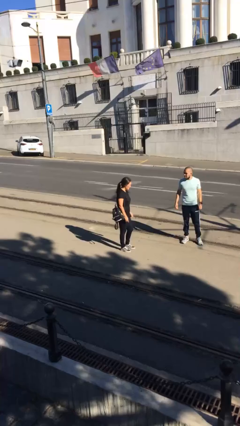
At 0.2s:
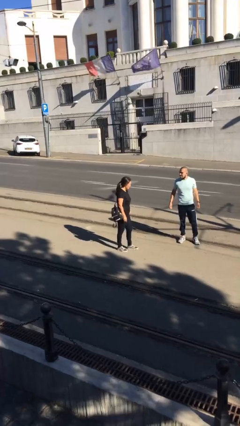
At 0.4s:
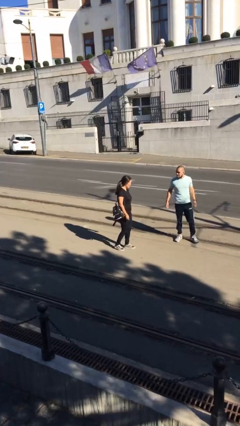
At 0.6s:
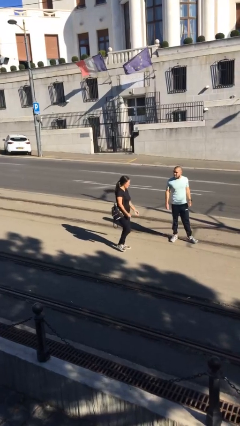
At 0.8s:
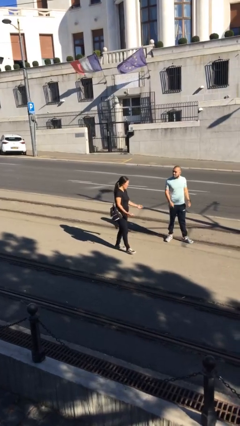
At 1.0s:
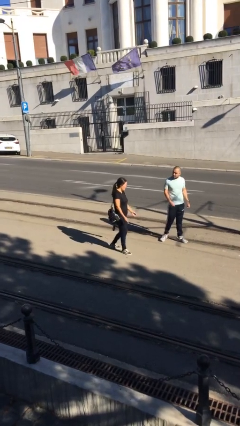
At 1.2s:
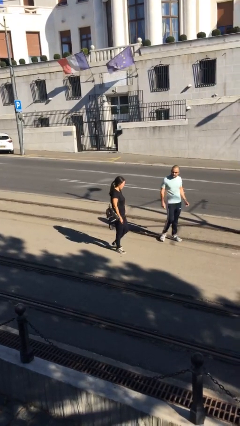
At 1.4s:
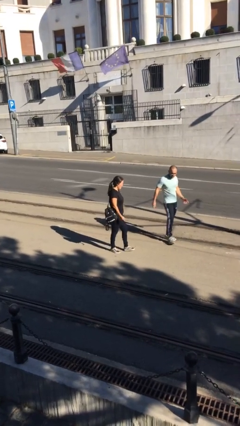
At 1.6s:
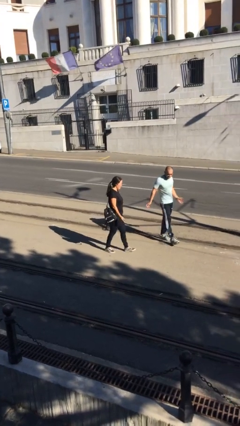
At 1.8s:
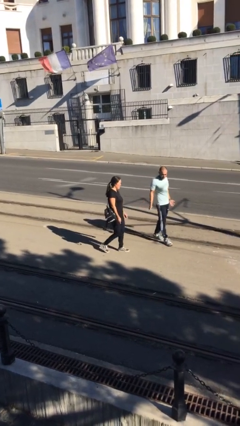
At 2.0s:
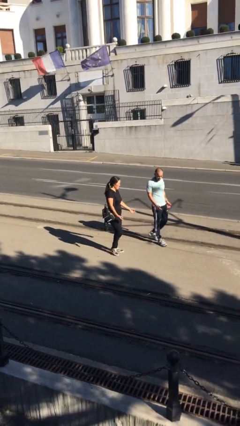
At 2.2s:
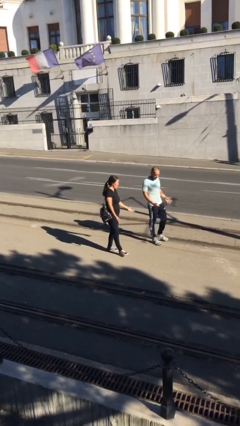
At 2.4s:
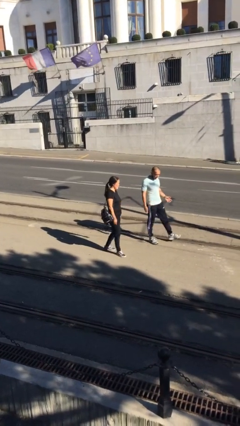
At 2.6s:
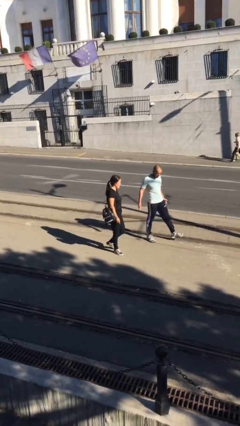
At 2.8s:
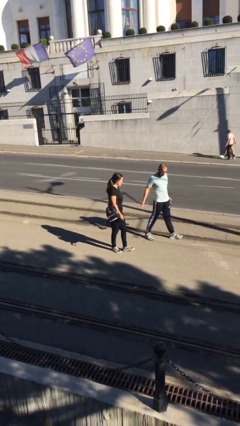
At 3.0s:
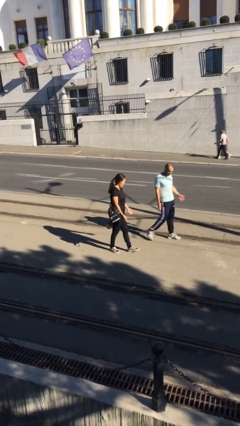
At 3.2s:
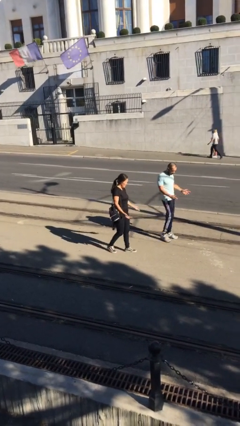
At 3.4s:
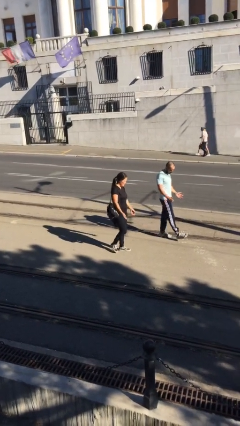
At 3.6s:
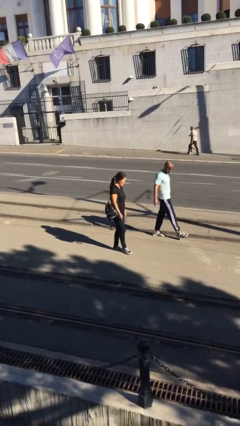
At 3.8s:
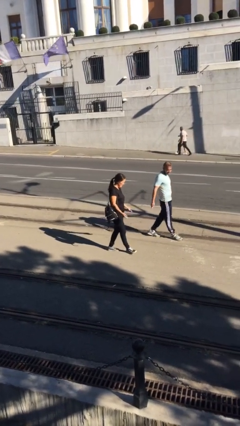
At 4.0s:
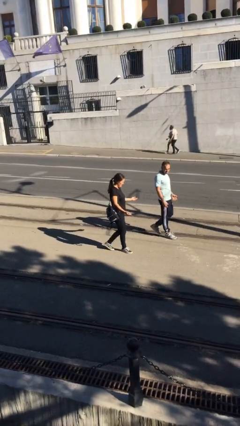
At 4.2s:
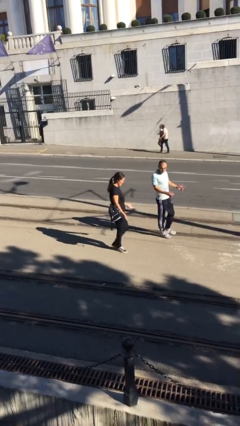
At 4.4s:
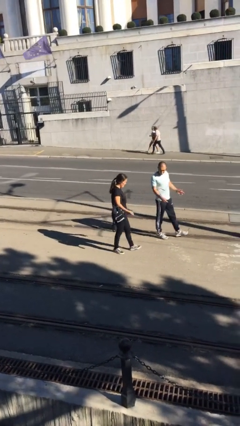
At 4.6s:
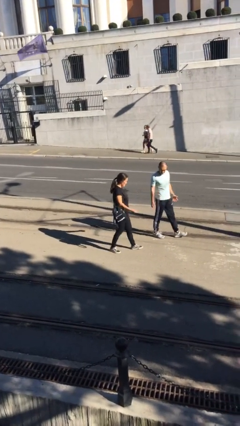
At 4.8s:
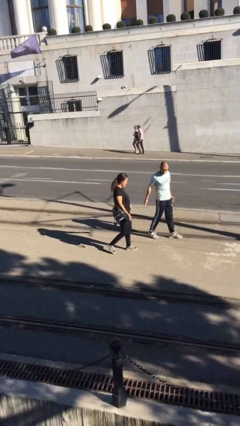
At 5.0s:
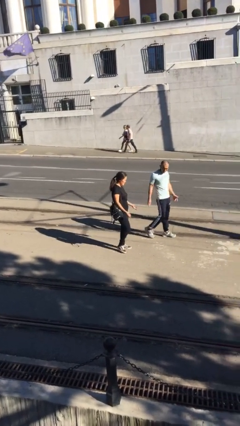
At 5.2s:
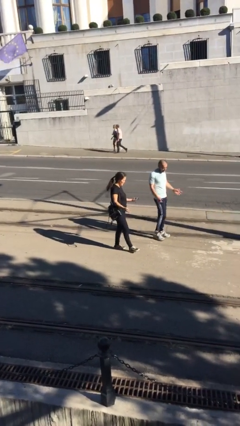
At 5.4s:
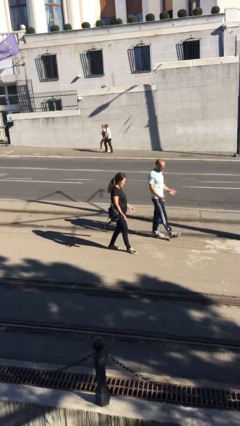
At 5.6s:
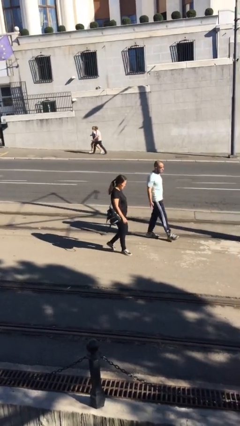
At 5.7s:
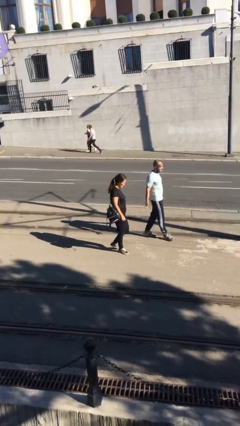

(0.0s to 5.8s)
person talks to person

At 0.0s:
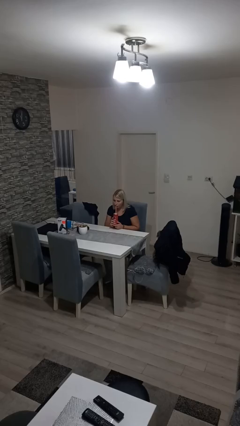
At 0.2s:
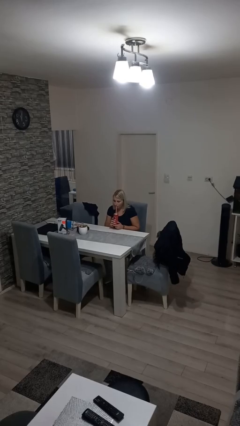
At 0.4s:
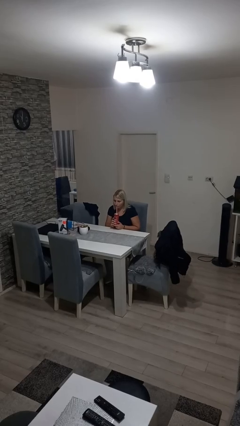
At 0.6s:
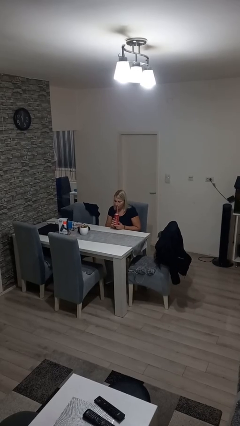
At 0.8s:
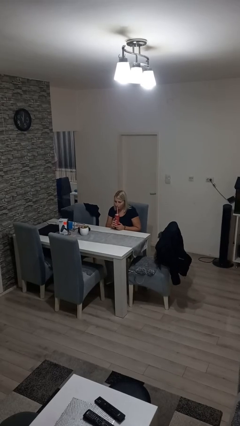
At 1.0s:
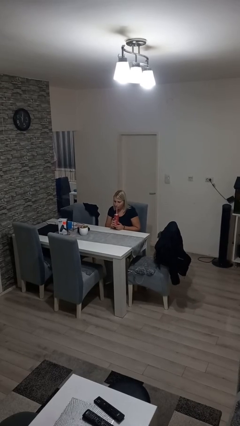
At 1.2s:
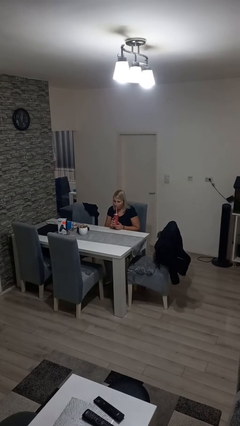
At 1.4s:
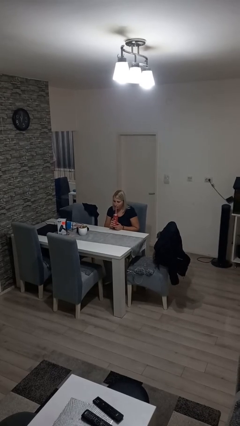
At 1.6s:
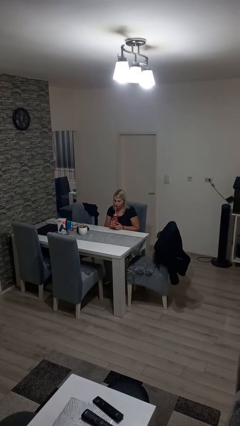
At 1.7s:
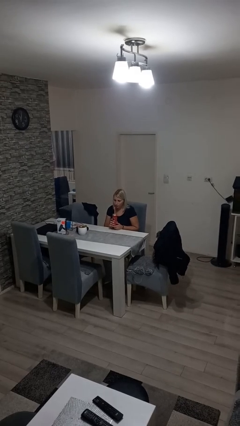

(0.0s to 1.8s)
person drinks from straw

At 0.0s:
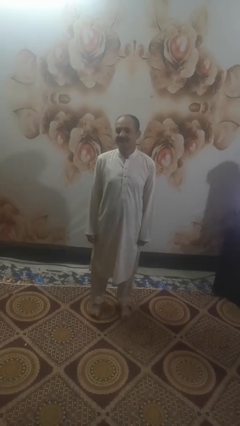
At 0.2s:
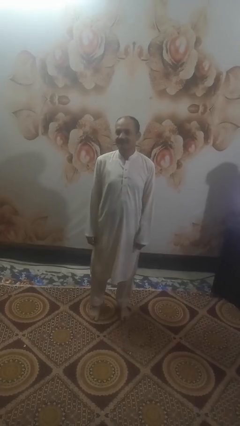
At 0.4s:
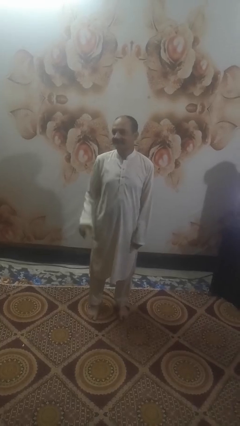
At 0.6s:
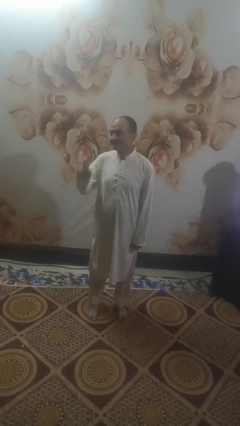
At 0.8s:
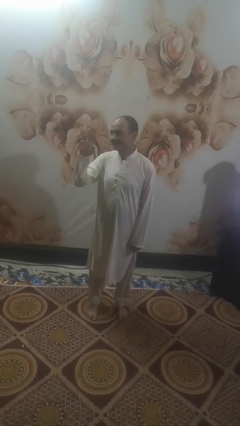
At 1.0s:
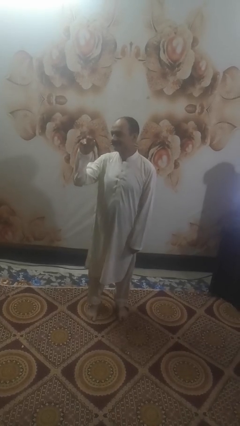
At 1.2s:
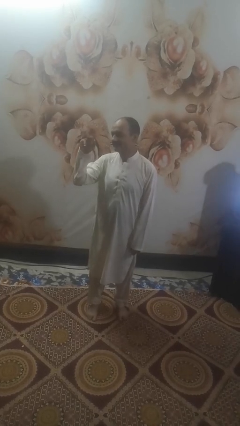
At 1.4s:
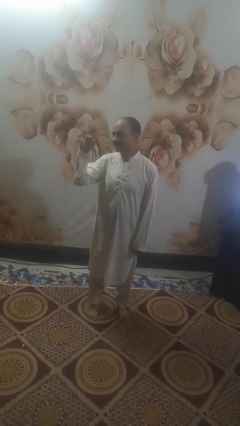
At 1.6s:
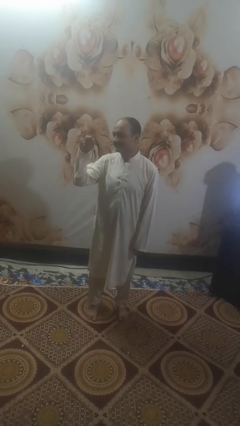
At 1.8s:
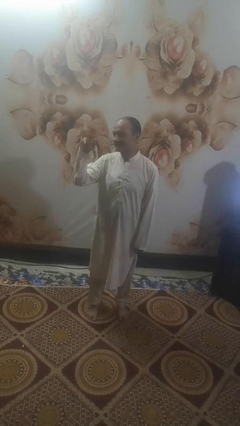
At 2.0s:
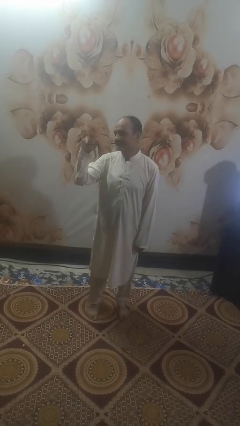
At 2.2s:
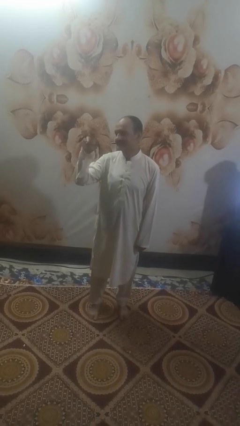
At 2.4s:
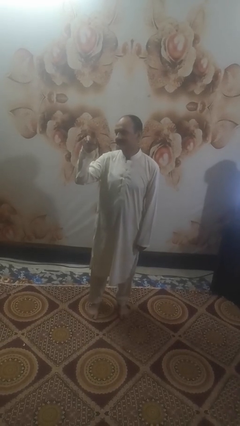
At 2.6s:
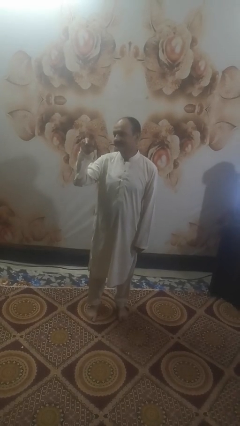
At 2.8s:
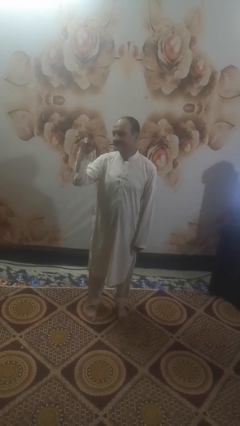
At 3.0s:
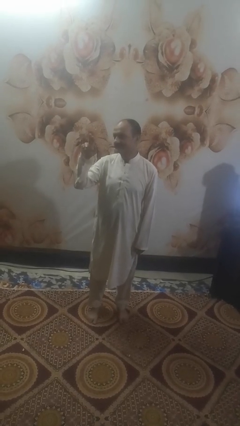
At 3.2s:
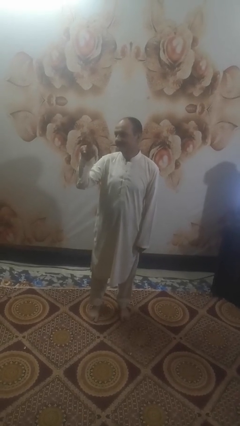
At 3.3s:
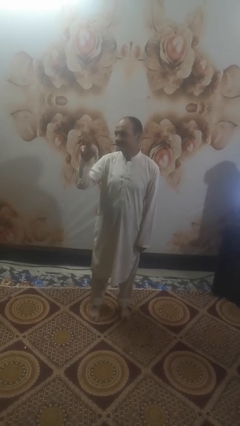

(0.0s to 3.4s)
person gestures come here

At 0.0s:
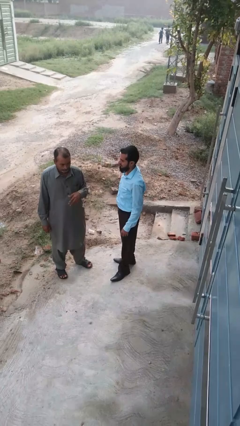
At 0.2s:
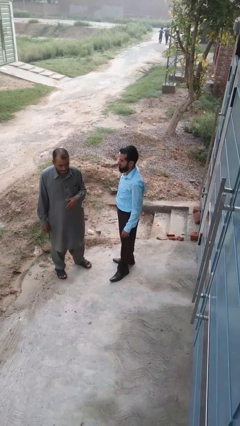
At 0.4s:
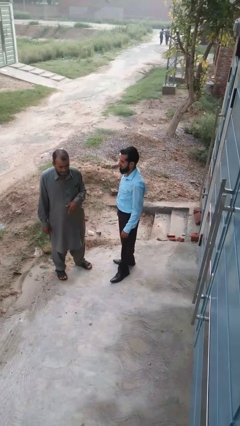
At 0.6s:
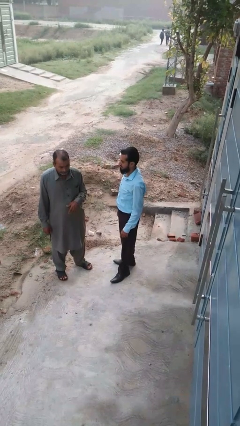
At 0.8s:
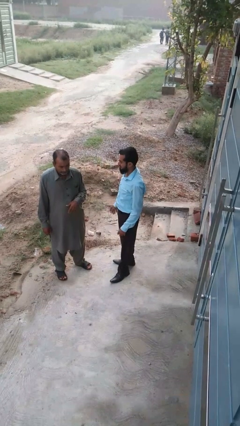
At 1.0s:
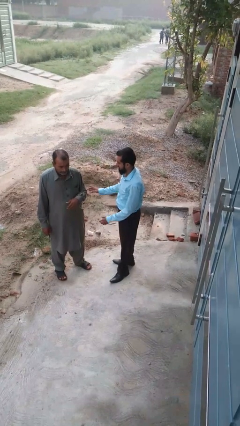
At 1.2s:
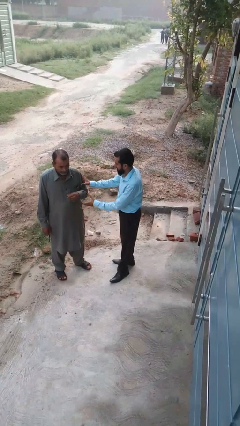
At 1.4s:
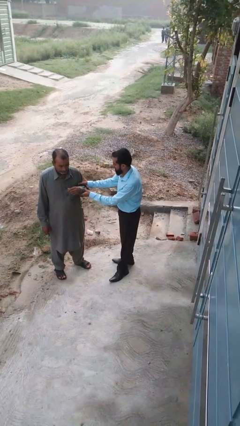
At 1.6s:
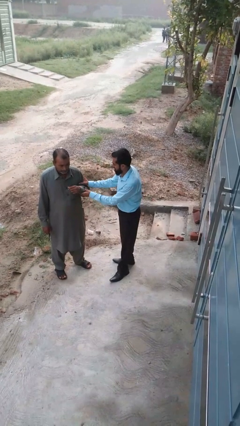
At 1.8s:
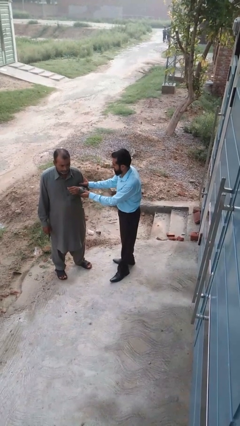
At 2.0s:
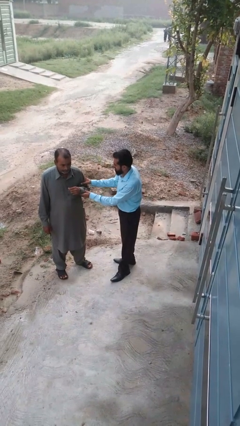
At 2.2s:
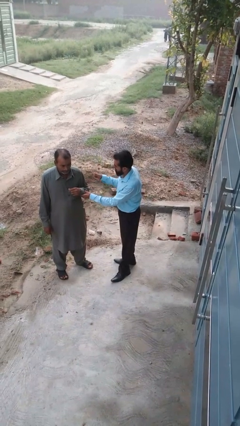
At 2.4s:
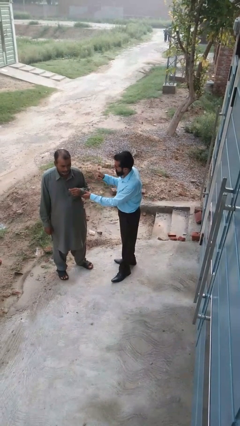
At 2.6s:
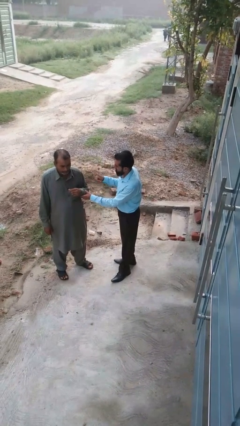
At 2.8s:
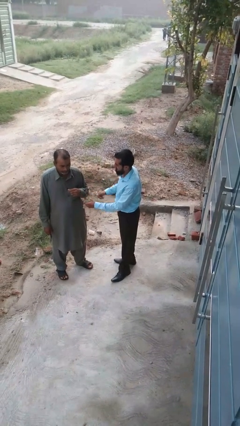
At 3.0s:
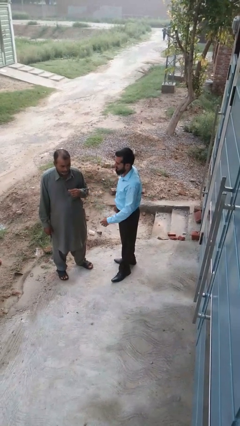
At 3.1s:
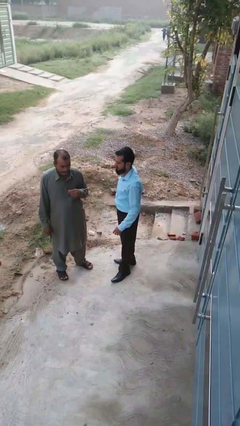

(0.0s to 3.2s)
person grabs person by bicep

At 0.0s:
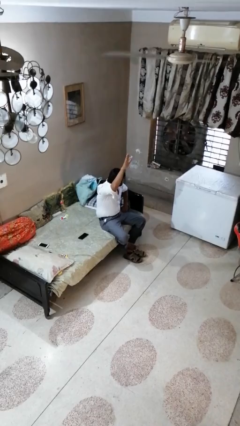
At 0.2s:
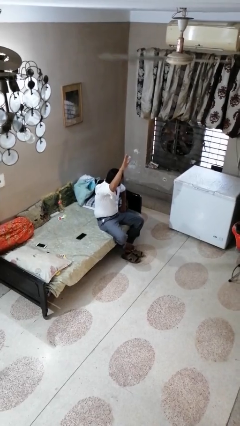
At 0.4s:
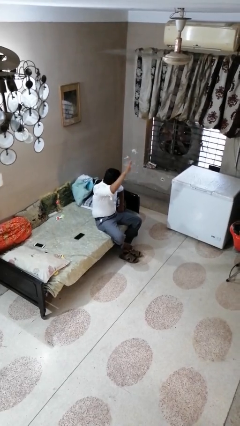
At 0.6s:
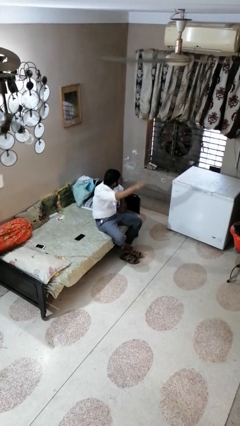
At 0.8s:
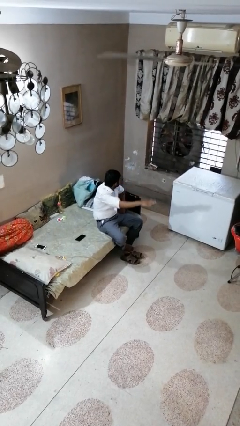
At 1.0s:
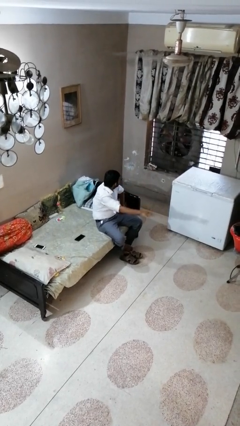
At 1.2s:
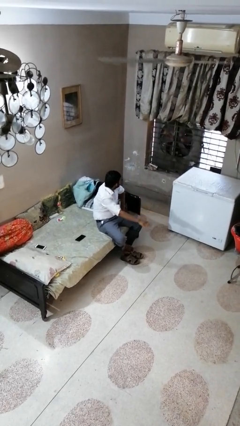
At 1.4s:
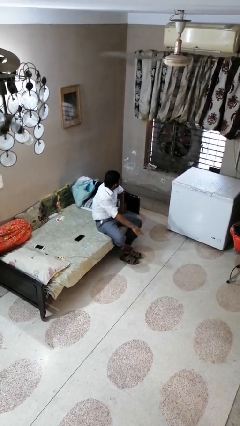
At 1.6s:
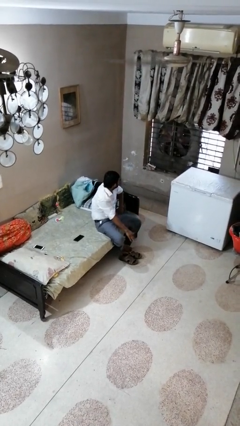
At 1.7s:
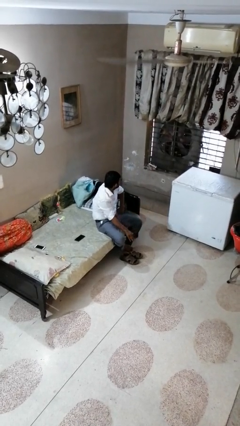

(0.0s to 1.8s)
person gestures swipe down

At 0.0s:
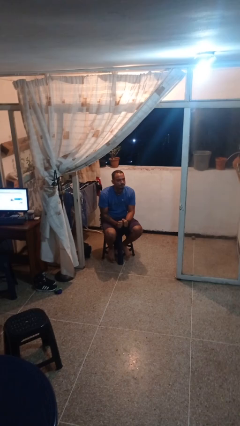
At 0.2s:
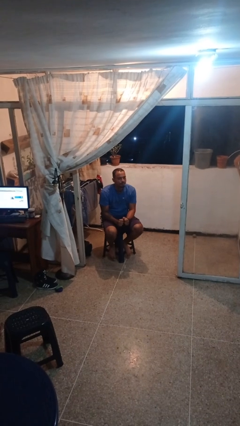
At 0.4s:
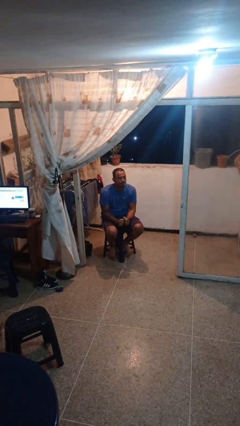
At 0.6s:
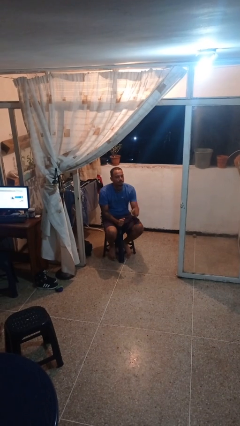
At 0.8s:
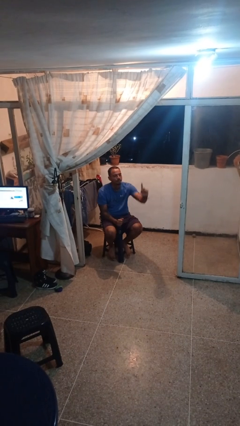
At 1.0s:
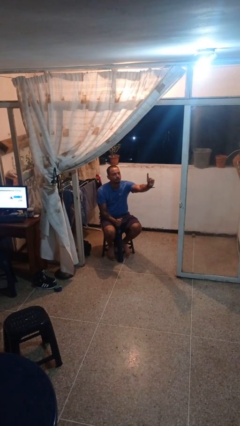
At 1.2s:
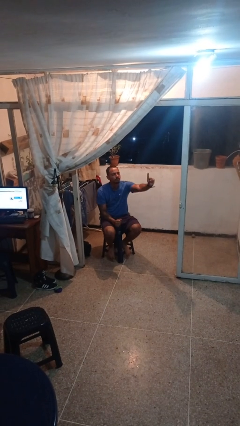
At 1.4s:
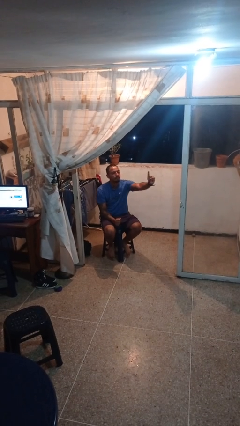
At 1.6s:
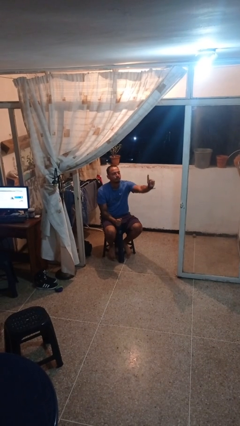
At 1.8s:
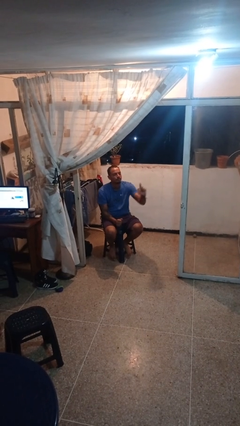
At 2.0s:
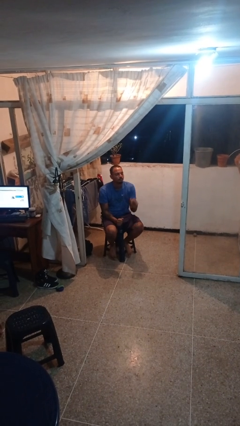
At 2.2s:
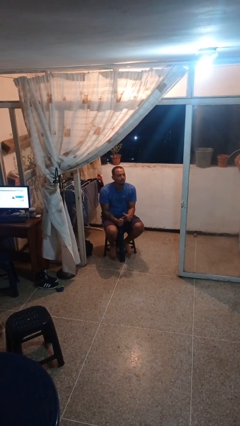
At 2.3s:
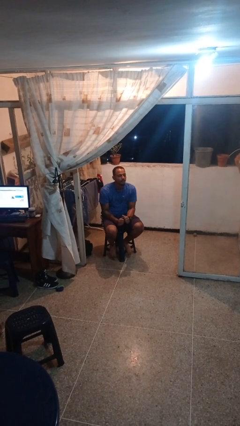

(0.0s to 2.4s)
person gestures number one
